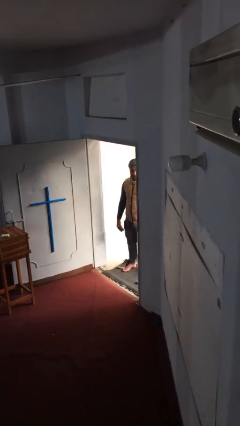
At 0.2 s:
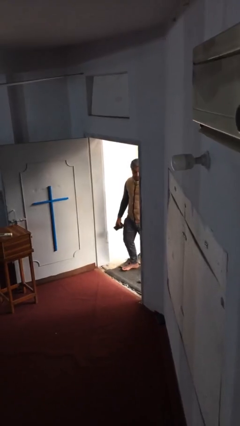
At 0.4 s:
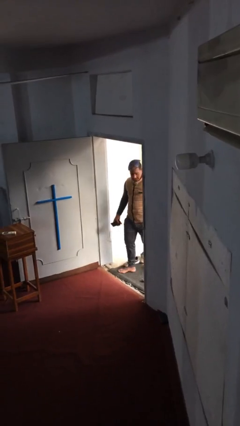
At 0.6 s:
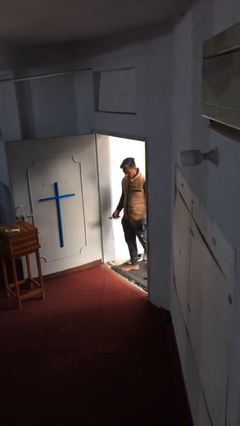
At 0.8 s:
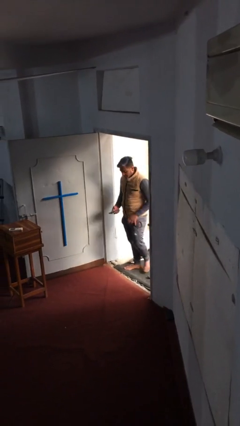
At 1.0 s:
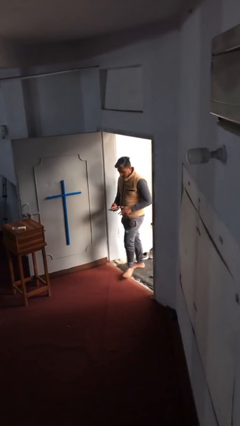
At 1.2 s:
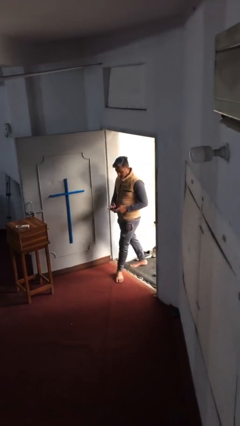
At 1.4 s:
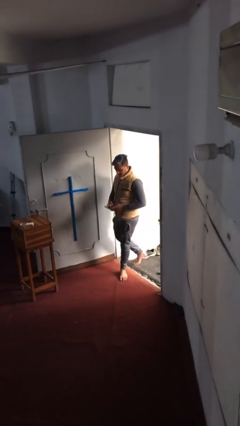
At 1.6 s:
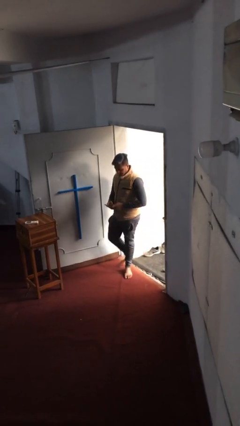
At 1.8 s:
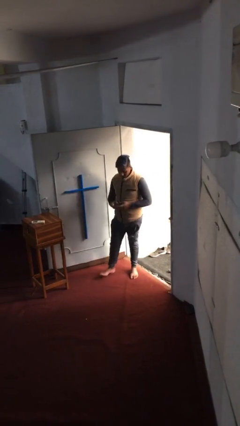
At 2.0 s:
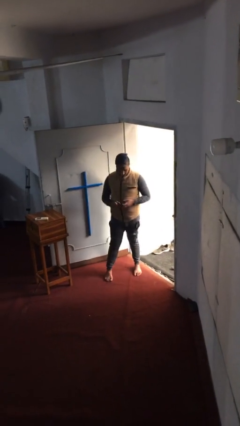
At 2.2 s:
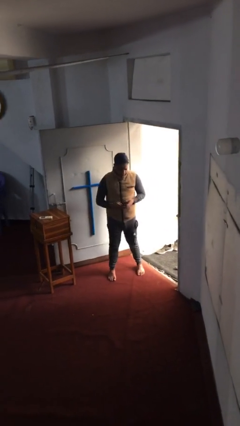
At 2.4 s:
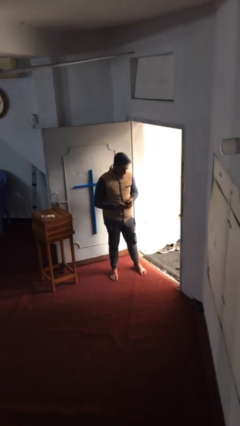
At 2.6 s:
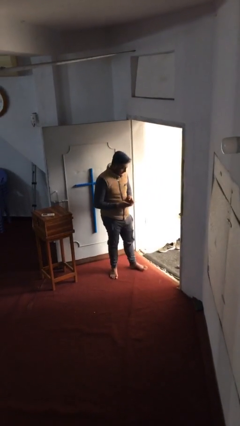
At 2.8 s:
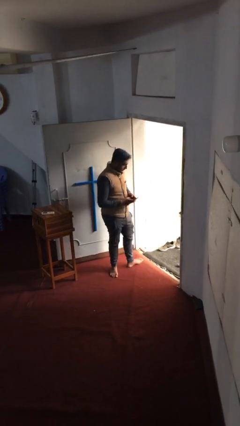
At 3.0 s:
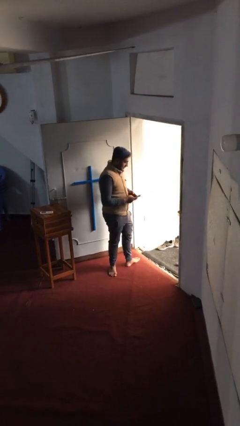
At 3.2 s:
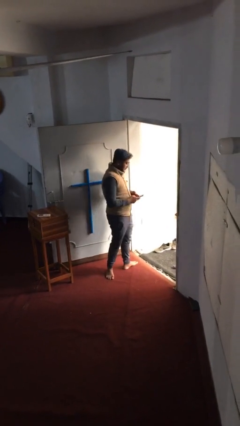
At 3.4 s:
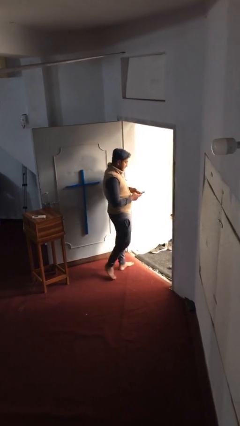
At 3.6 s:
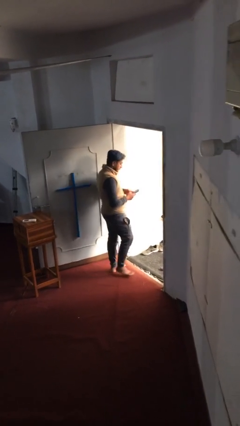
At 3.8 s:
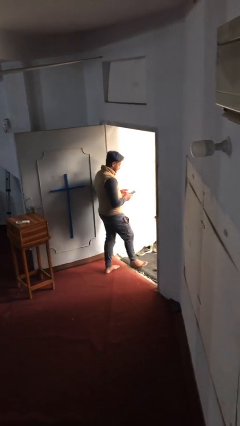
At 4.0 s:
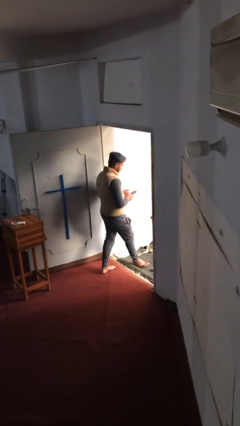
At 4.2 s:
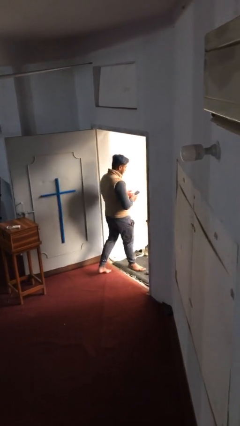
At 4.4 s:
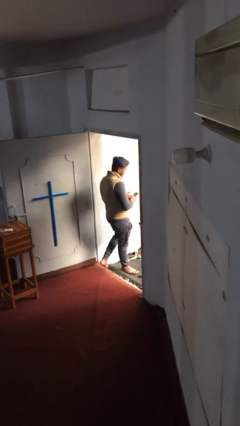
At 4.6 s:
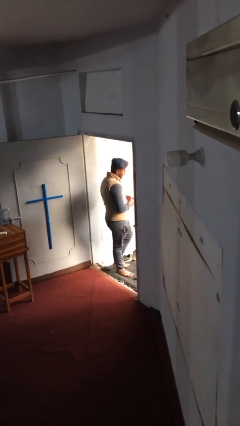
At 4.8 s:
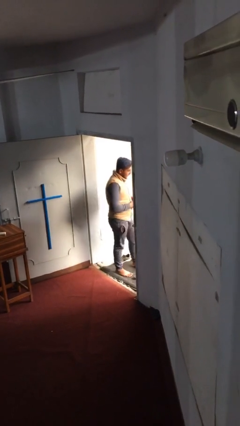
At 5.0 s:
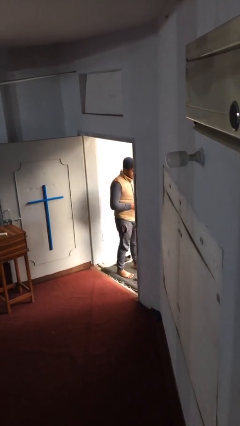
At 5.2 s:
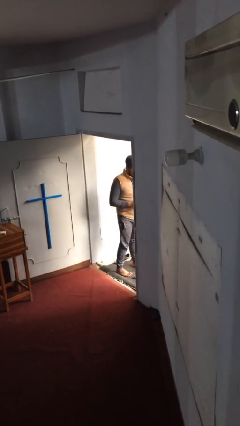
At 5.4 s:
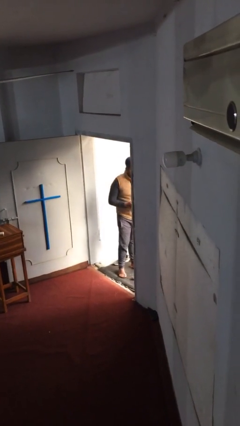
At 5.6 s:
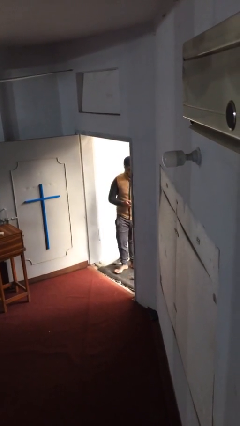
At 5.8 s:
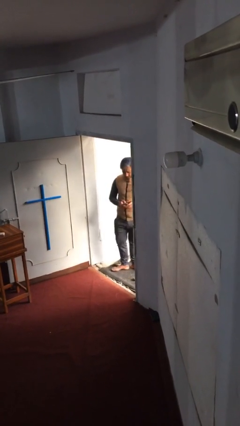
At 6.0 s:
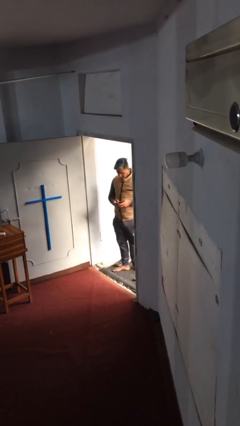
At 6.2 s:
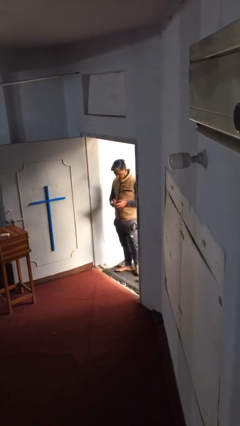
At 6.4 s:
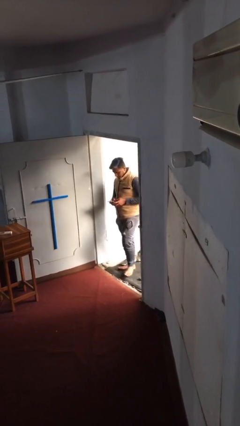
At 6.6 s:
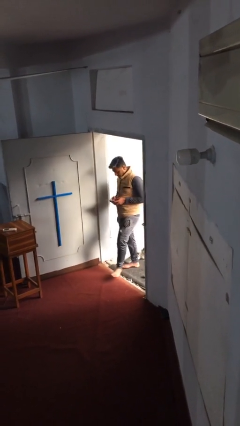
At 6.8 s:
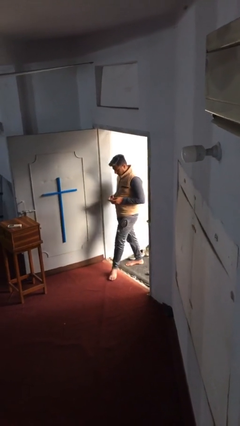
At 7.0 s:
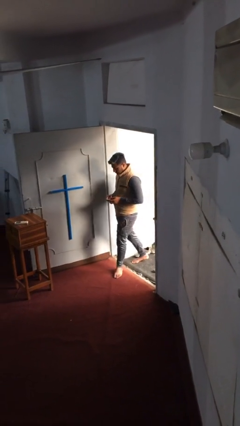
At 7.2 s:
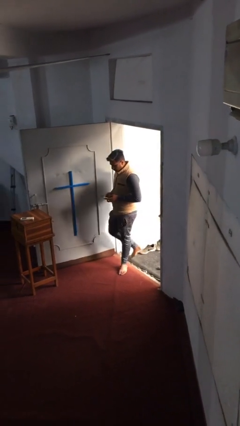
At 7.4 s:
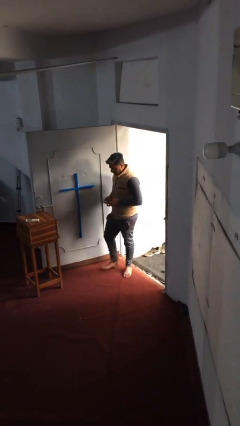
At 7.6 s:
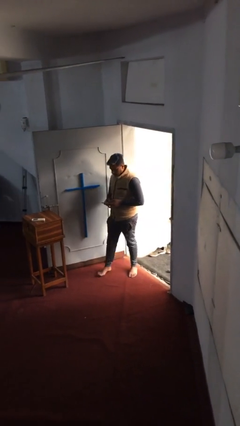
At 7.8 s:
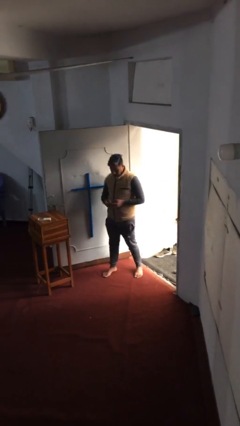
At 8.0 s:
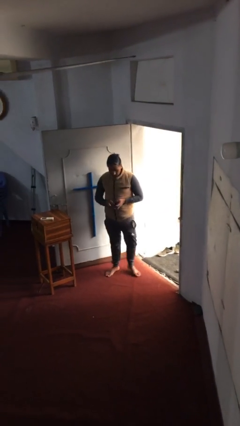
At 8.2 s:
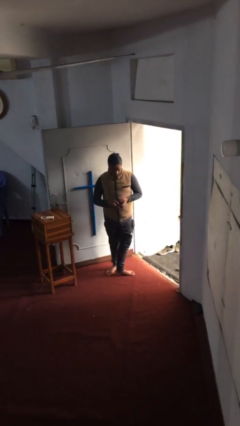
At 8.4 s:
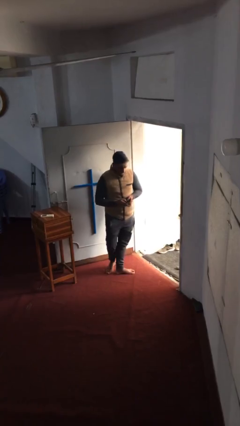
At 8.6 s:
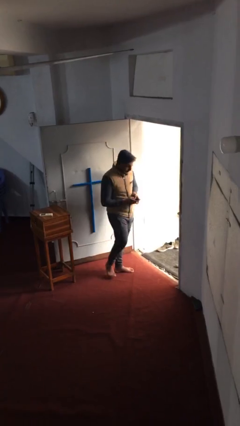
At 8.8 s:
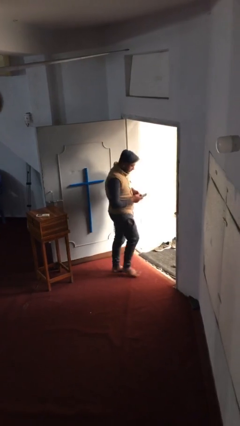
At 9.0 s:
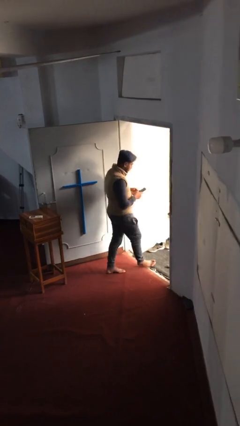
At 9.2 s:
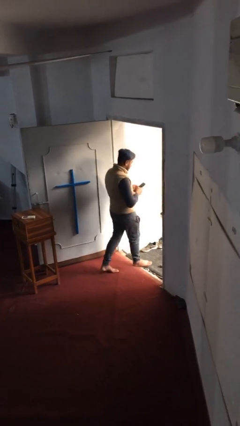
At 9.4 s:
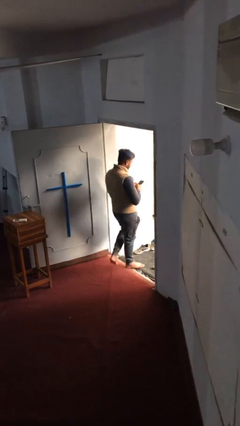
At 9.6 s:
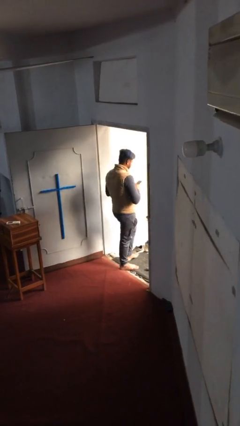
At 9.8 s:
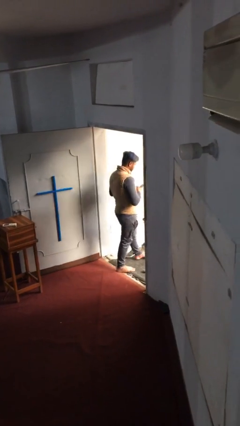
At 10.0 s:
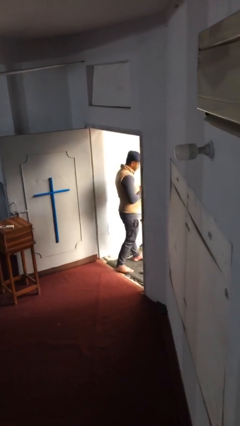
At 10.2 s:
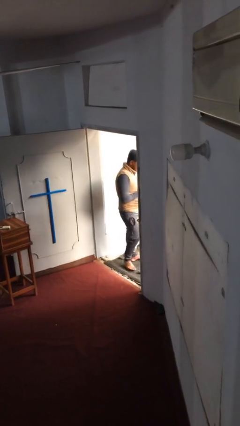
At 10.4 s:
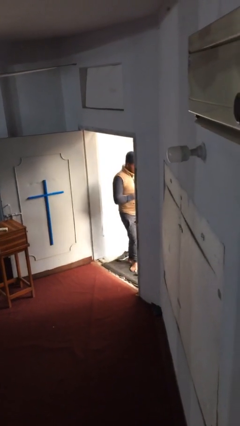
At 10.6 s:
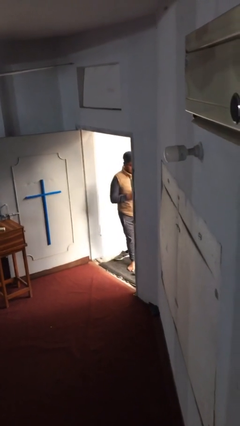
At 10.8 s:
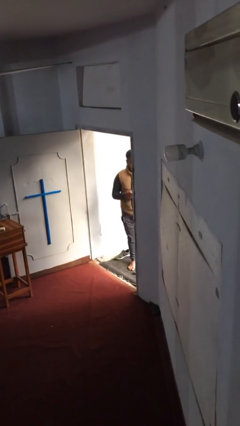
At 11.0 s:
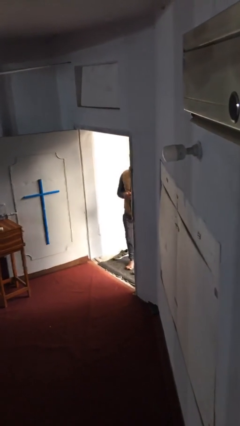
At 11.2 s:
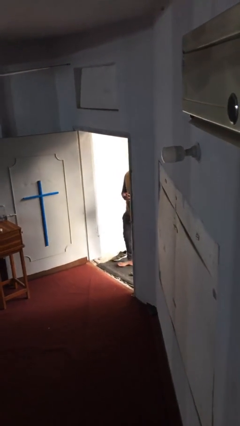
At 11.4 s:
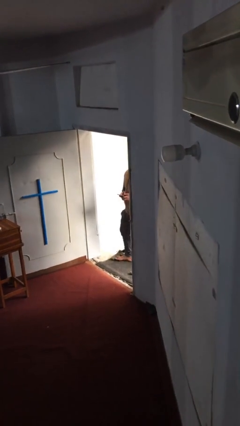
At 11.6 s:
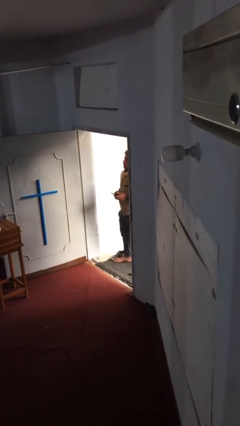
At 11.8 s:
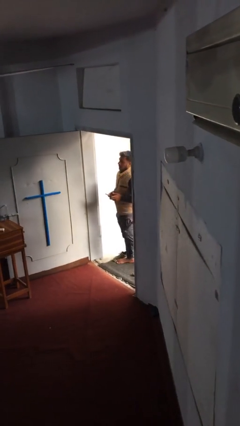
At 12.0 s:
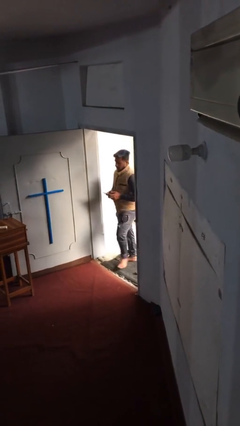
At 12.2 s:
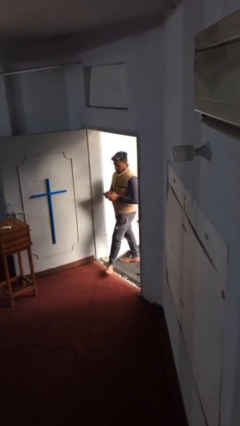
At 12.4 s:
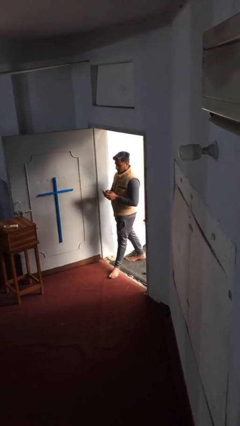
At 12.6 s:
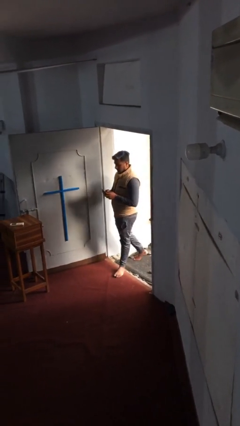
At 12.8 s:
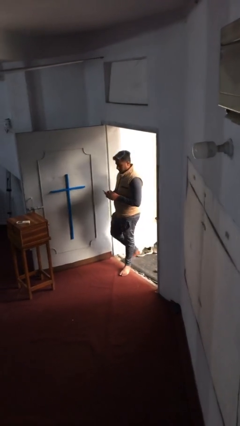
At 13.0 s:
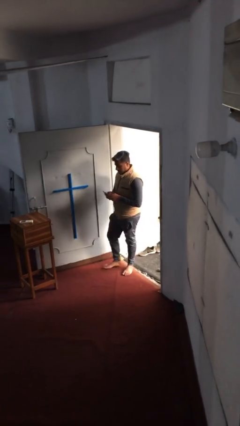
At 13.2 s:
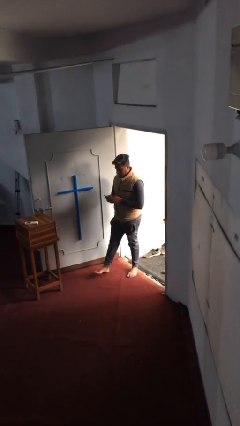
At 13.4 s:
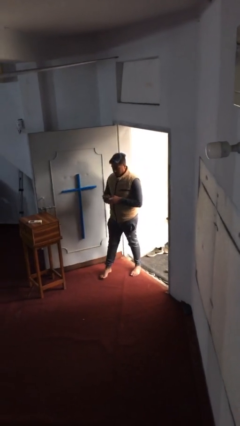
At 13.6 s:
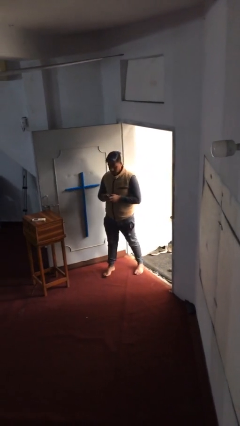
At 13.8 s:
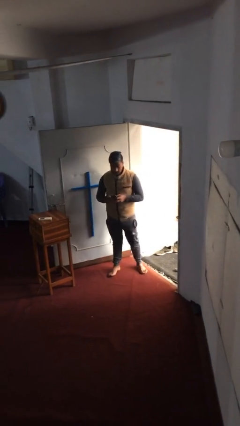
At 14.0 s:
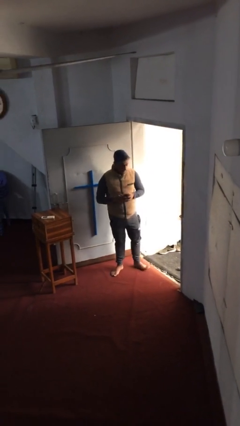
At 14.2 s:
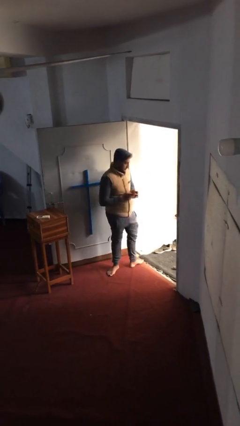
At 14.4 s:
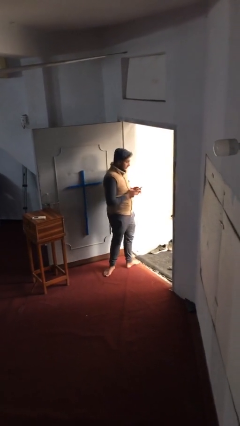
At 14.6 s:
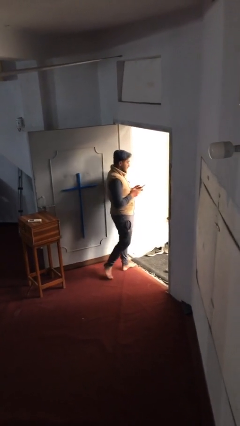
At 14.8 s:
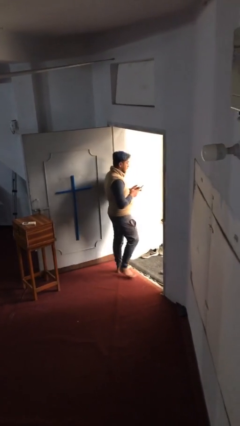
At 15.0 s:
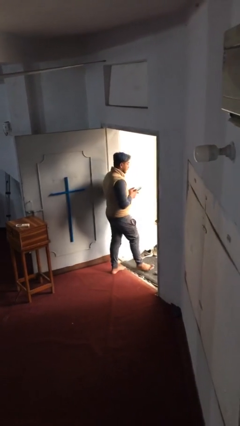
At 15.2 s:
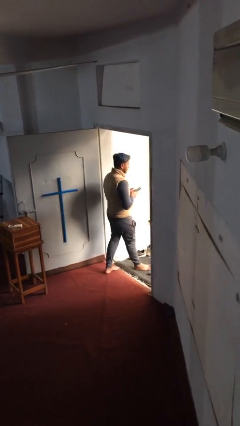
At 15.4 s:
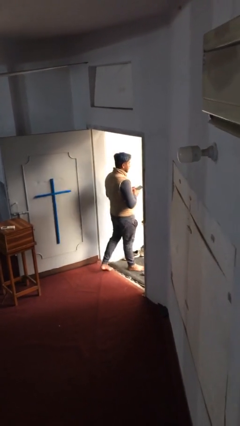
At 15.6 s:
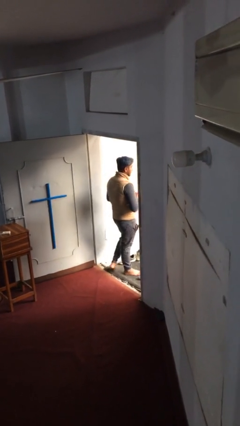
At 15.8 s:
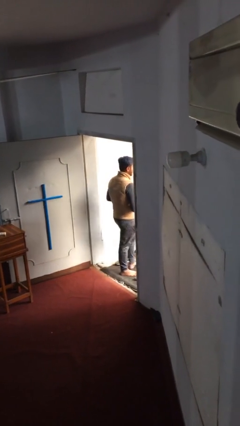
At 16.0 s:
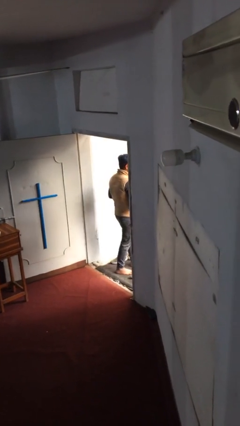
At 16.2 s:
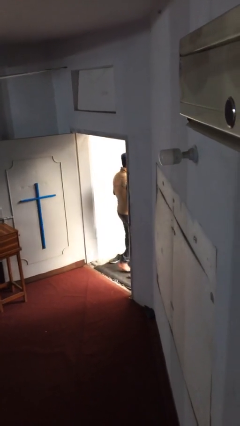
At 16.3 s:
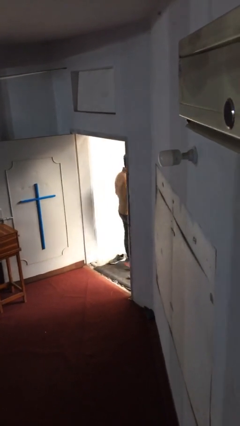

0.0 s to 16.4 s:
person texts on phone

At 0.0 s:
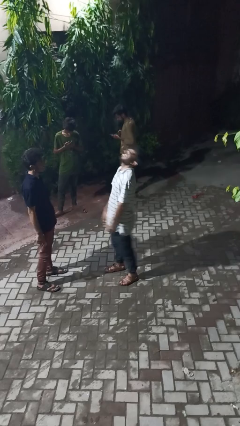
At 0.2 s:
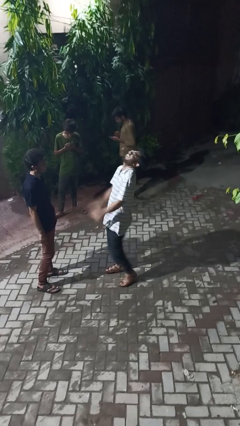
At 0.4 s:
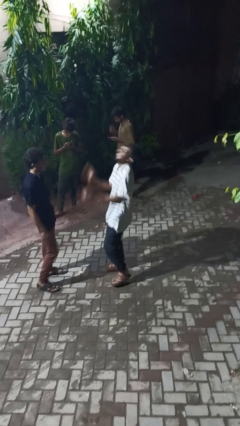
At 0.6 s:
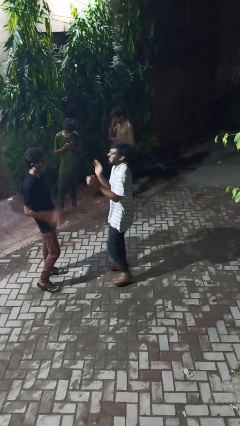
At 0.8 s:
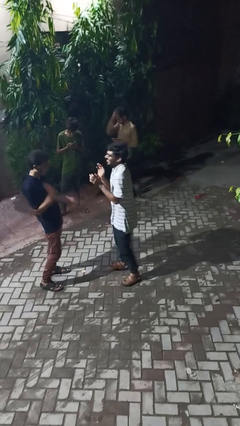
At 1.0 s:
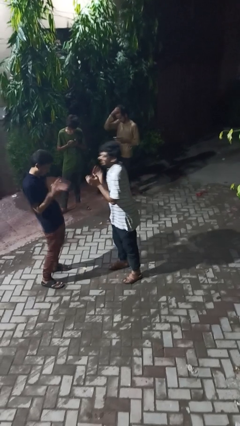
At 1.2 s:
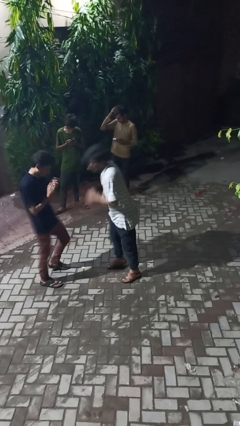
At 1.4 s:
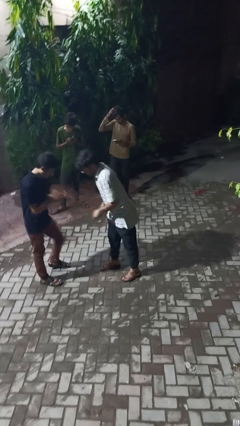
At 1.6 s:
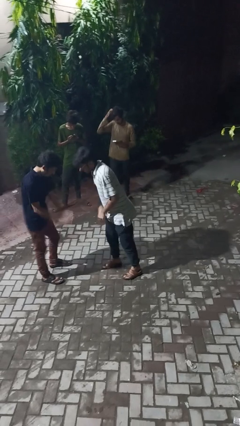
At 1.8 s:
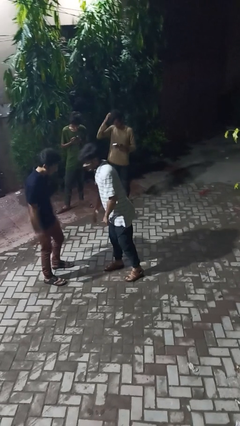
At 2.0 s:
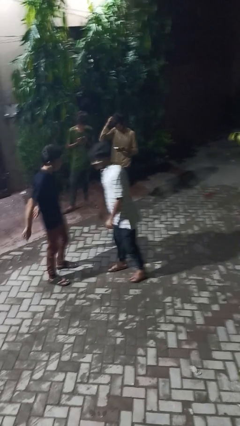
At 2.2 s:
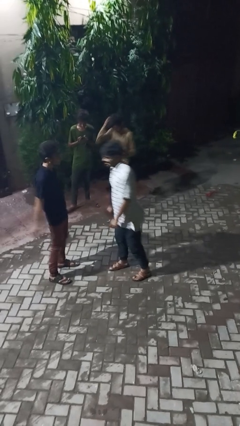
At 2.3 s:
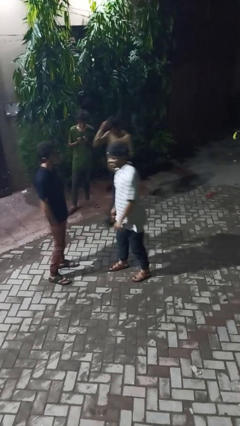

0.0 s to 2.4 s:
person laughs with person
